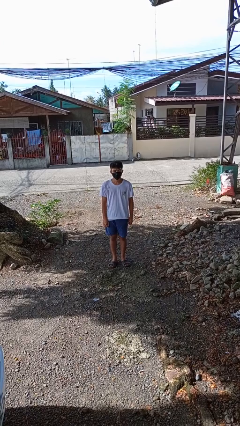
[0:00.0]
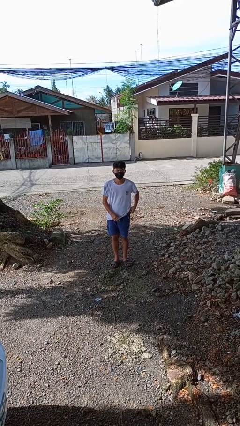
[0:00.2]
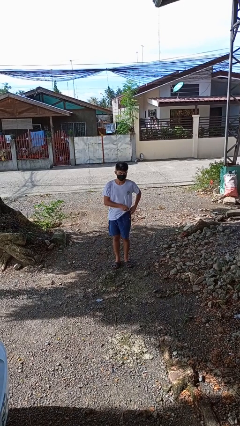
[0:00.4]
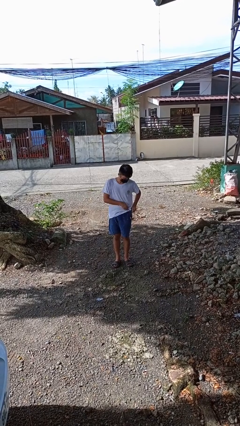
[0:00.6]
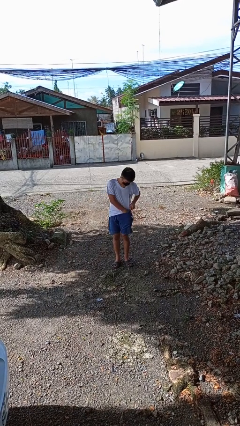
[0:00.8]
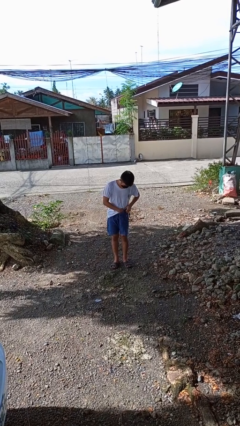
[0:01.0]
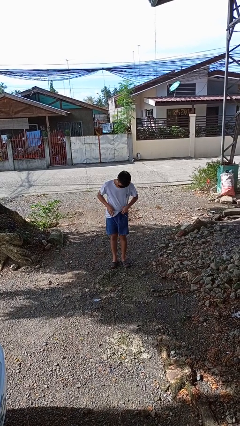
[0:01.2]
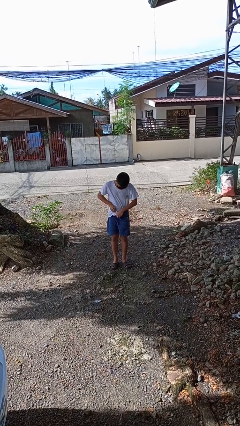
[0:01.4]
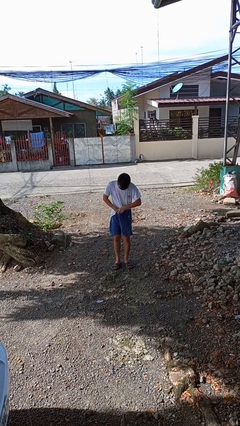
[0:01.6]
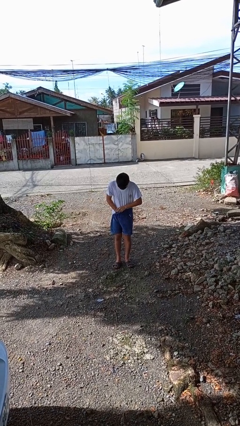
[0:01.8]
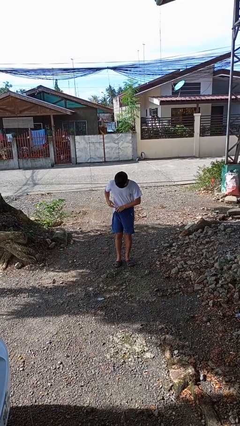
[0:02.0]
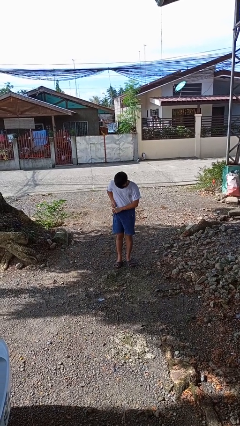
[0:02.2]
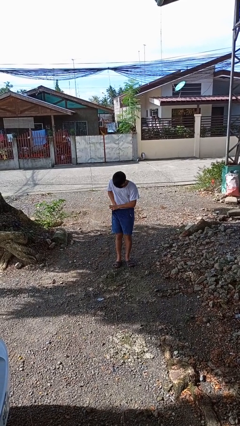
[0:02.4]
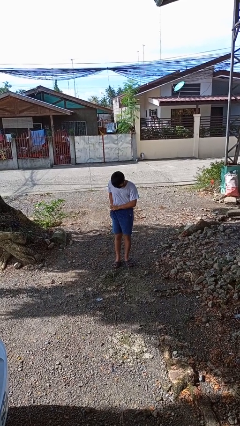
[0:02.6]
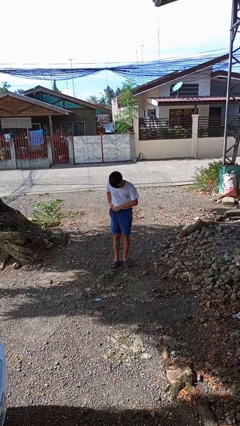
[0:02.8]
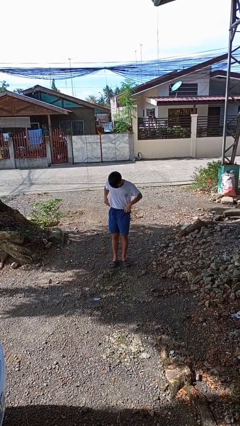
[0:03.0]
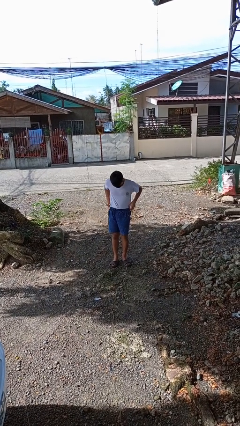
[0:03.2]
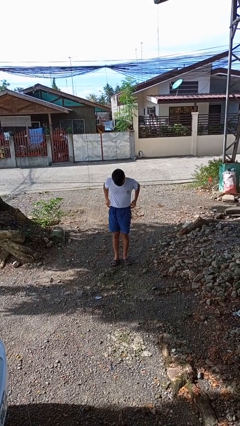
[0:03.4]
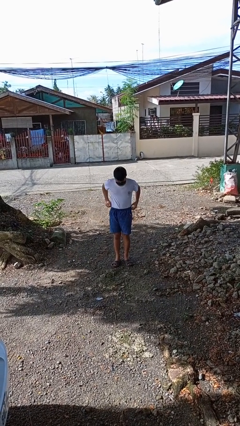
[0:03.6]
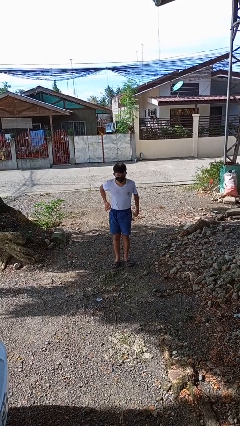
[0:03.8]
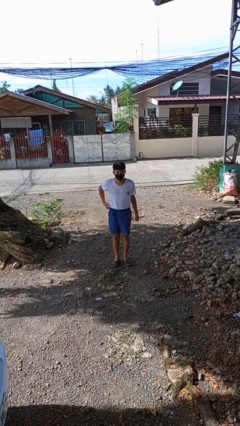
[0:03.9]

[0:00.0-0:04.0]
person tucks in shirt

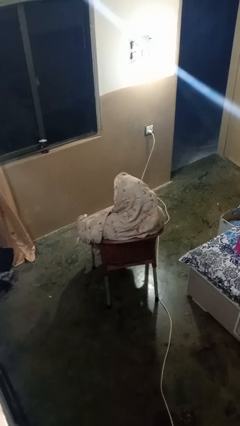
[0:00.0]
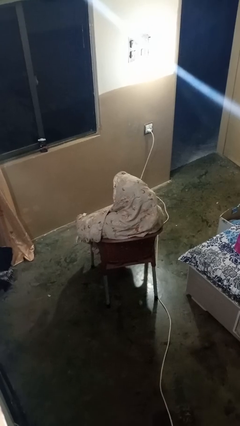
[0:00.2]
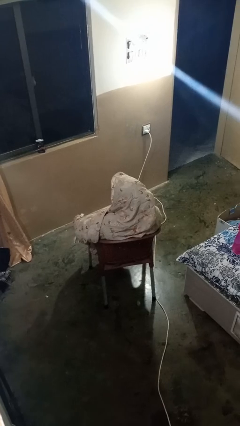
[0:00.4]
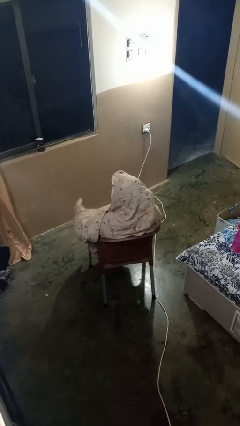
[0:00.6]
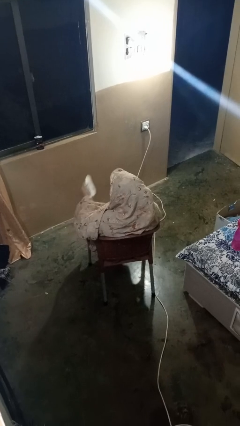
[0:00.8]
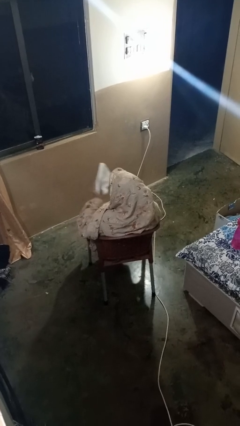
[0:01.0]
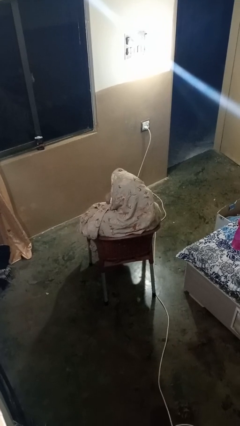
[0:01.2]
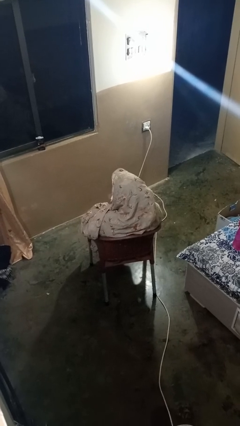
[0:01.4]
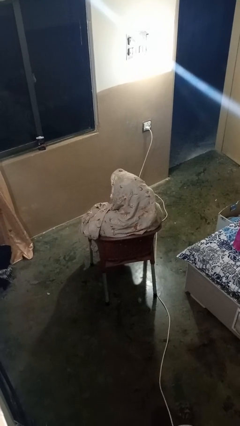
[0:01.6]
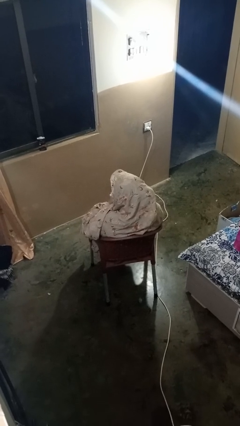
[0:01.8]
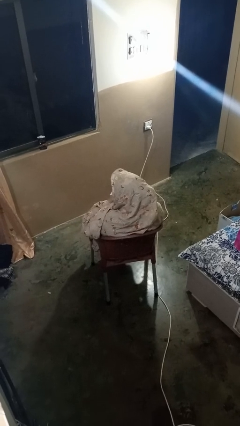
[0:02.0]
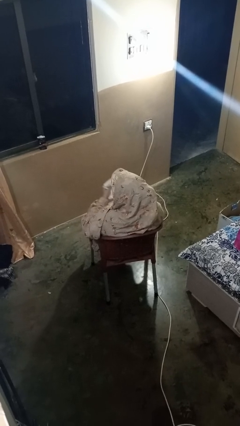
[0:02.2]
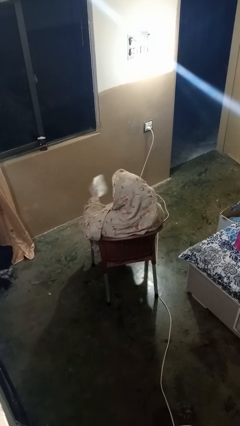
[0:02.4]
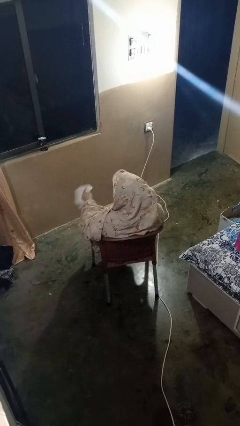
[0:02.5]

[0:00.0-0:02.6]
person wipes mouth with napkin

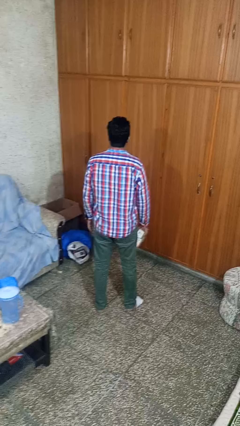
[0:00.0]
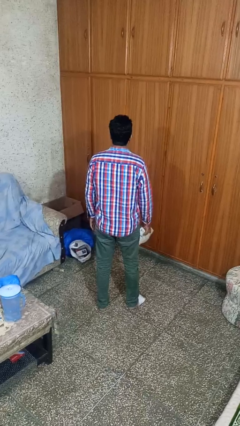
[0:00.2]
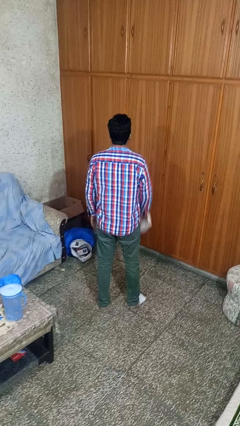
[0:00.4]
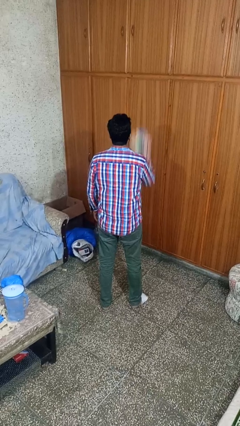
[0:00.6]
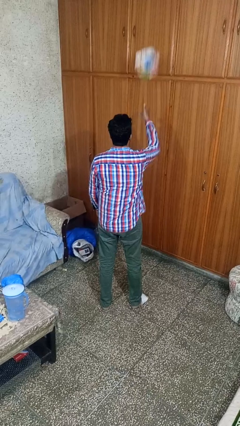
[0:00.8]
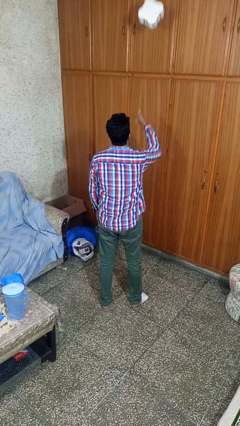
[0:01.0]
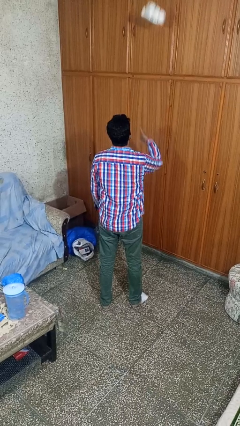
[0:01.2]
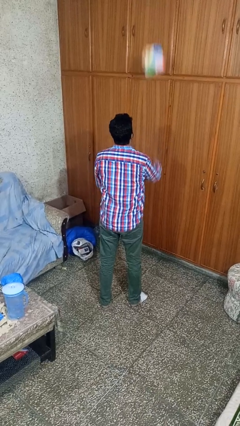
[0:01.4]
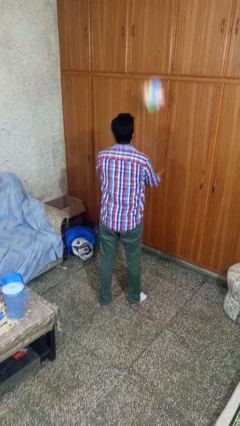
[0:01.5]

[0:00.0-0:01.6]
person drops object

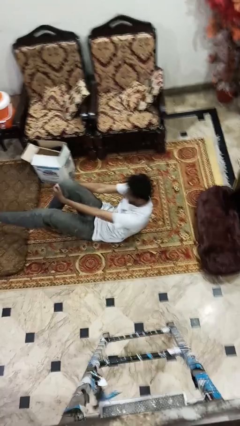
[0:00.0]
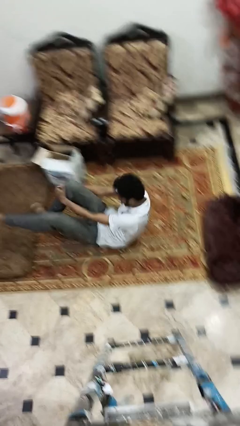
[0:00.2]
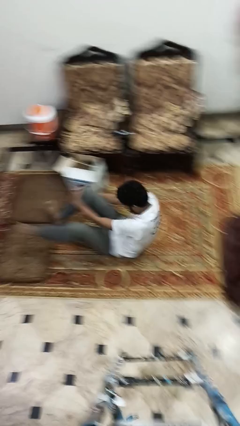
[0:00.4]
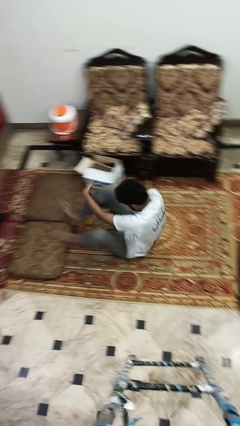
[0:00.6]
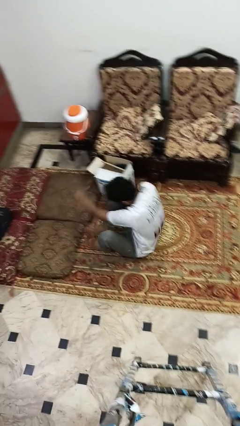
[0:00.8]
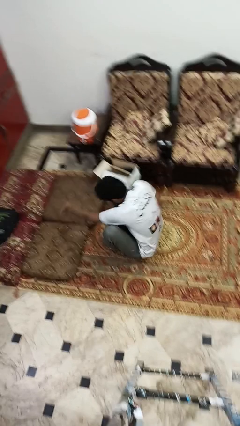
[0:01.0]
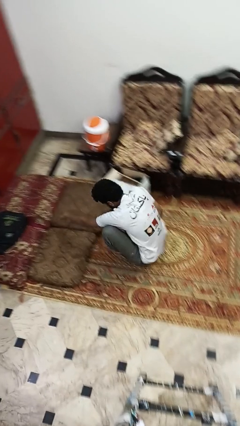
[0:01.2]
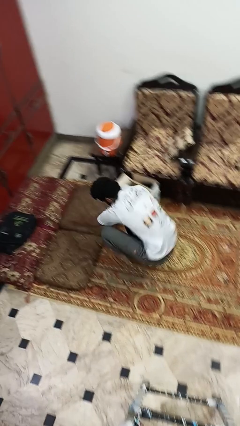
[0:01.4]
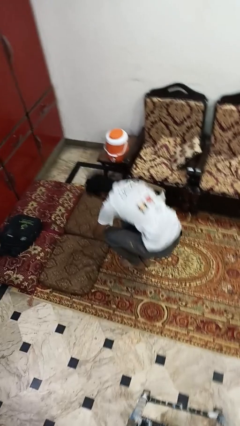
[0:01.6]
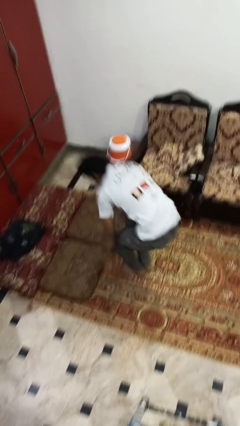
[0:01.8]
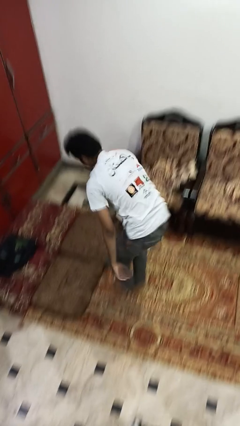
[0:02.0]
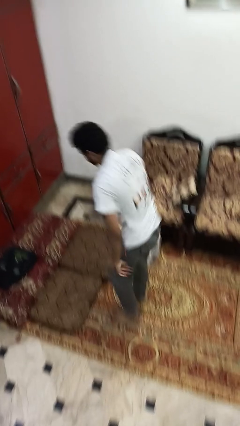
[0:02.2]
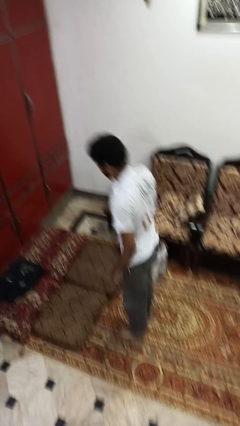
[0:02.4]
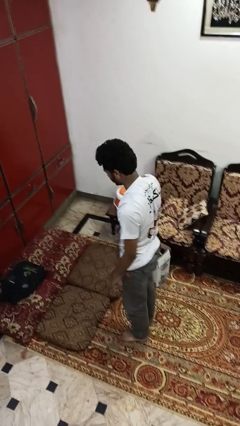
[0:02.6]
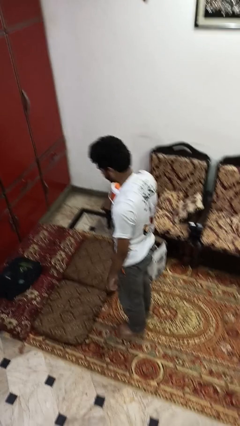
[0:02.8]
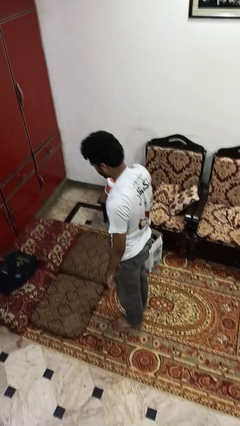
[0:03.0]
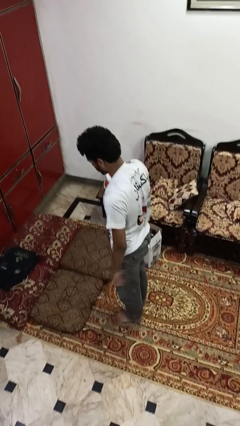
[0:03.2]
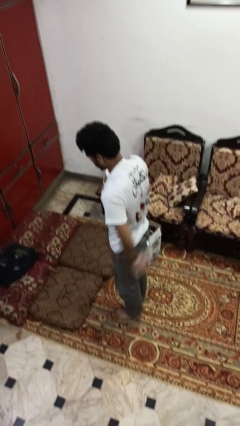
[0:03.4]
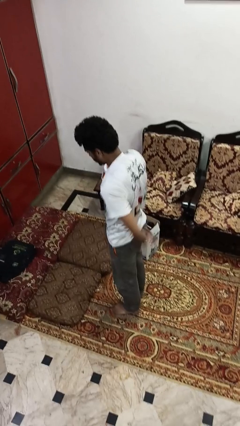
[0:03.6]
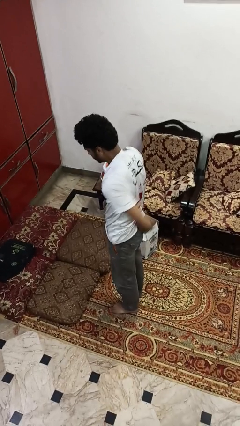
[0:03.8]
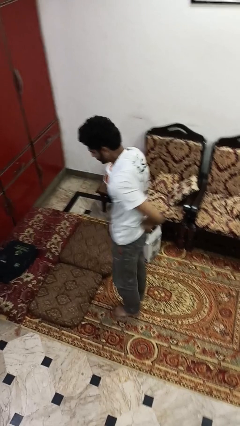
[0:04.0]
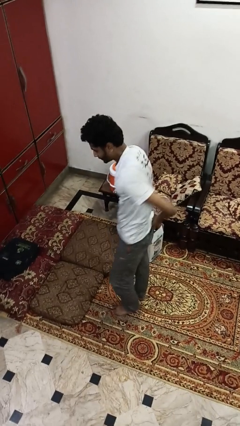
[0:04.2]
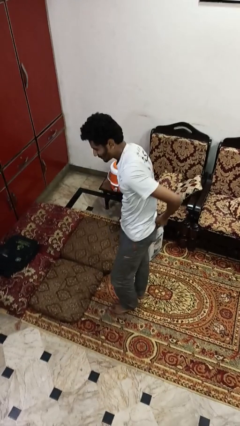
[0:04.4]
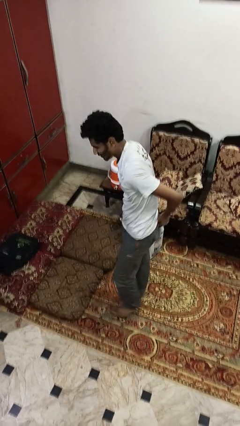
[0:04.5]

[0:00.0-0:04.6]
person stands up from floor

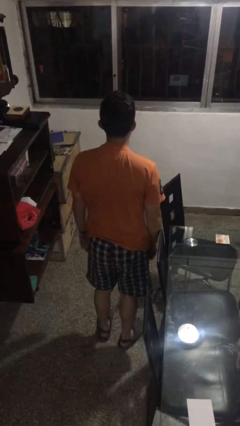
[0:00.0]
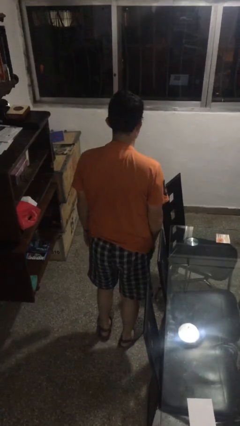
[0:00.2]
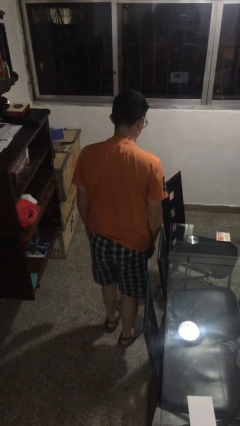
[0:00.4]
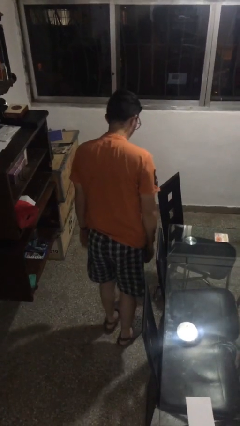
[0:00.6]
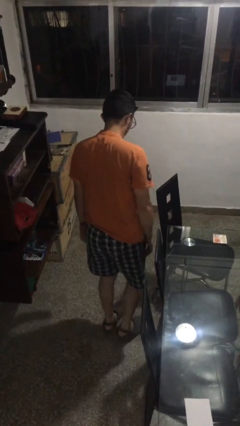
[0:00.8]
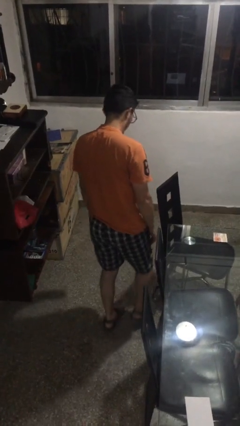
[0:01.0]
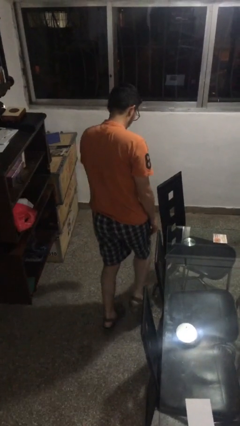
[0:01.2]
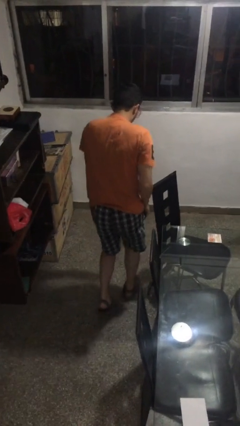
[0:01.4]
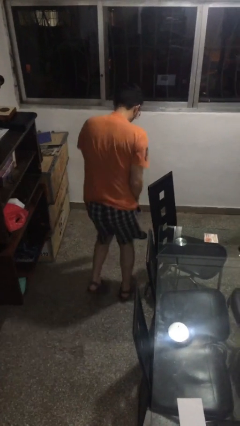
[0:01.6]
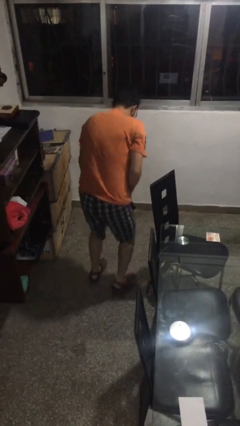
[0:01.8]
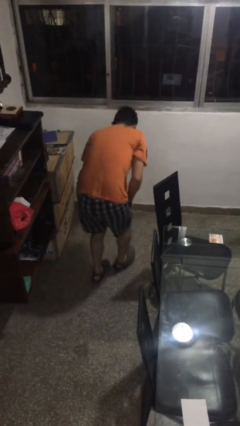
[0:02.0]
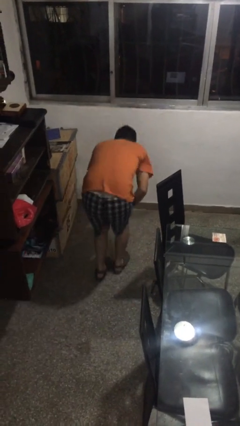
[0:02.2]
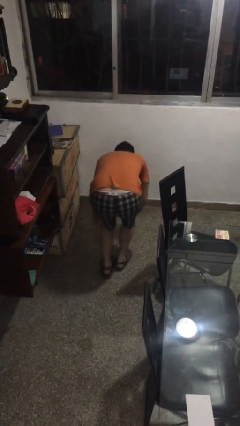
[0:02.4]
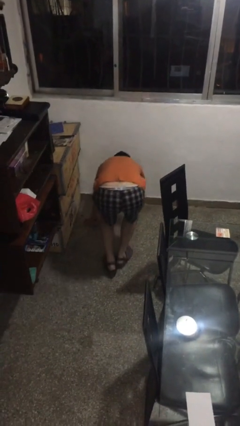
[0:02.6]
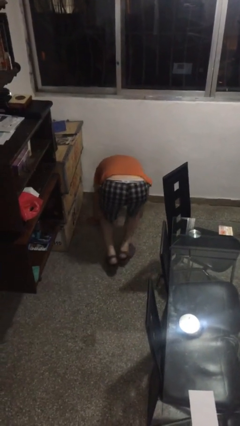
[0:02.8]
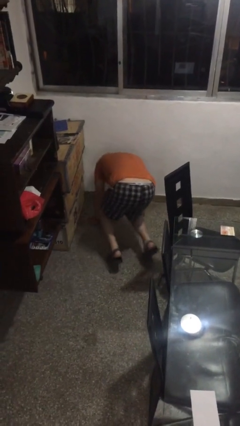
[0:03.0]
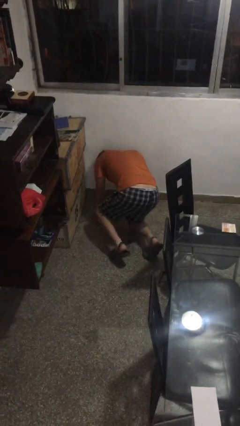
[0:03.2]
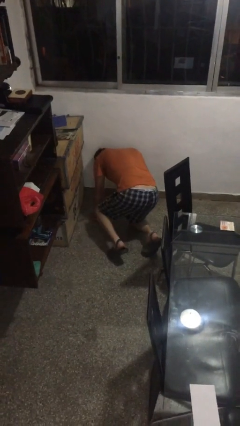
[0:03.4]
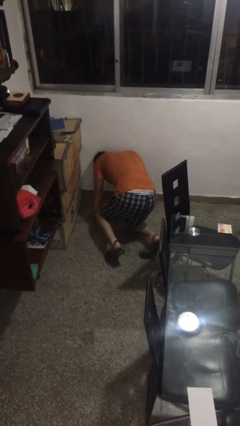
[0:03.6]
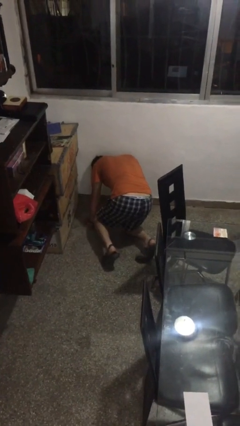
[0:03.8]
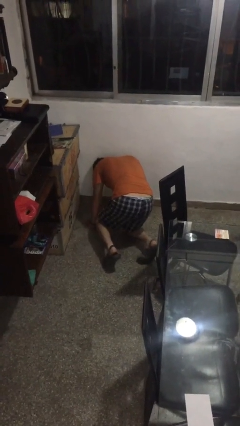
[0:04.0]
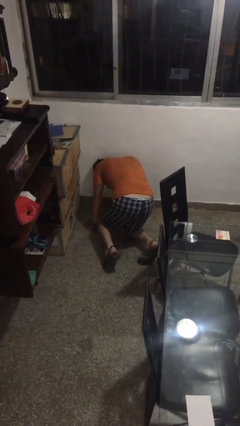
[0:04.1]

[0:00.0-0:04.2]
person trips on object on floor

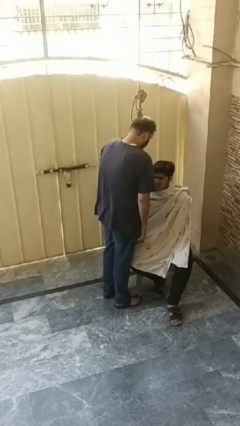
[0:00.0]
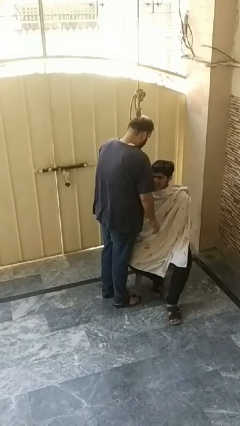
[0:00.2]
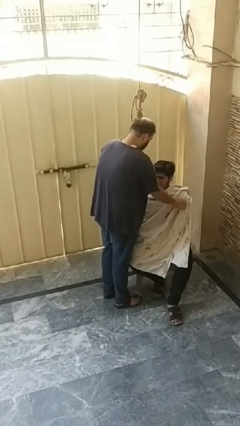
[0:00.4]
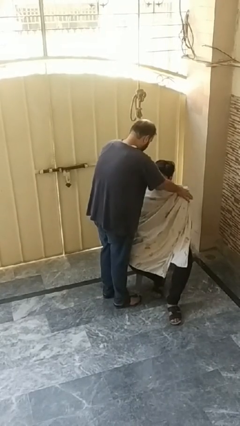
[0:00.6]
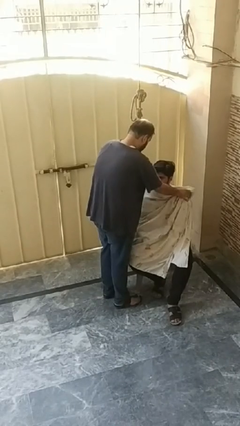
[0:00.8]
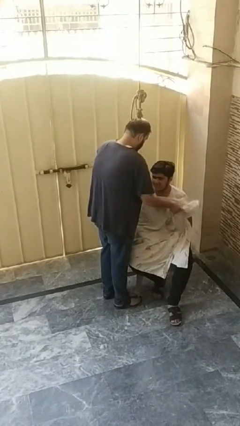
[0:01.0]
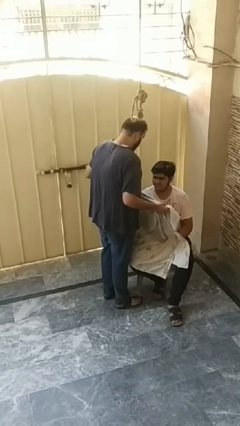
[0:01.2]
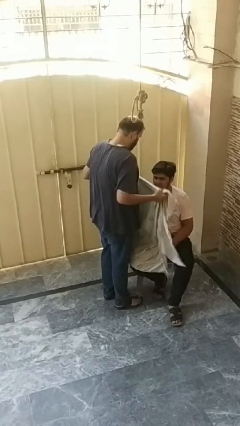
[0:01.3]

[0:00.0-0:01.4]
person uncovers friend with blanket
